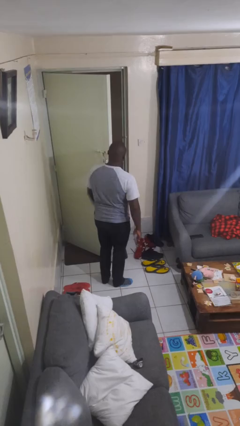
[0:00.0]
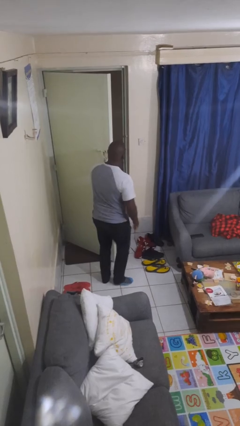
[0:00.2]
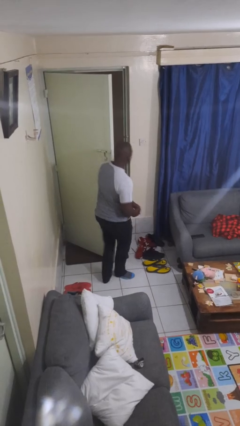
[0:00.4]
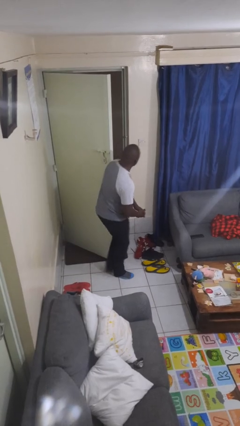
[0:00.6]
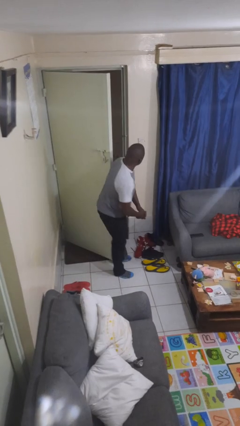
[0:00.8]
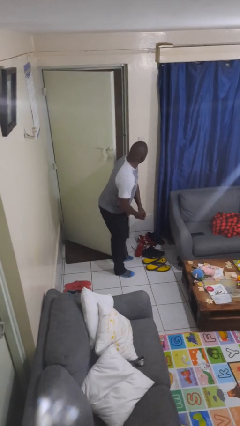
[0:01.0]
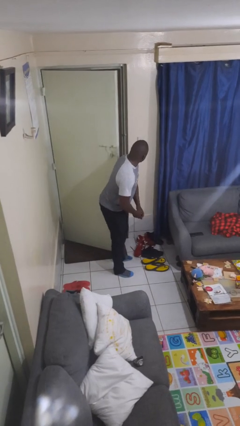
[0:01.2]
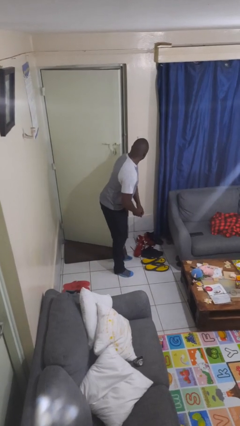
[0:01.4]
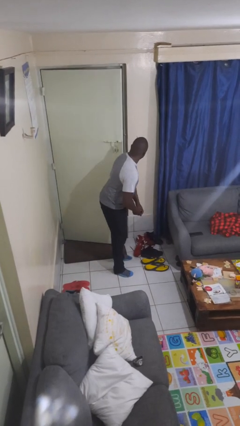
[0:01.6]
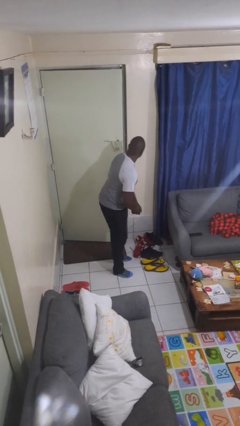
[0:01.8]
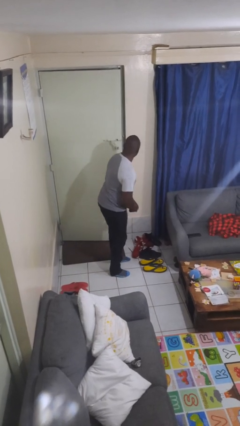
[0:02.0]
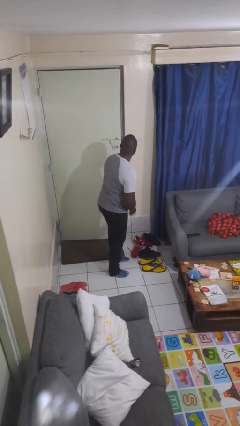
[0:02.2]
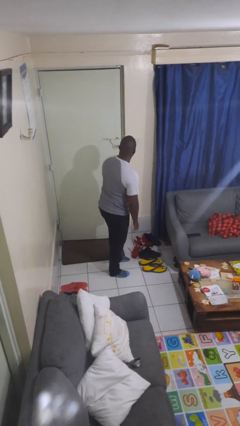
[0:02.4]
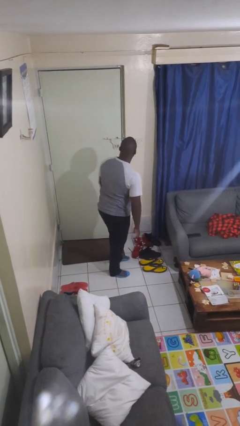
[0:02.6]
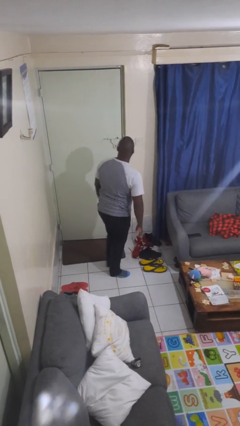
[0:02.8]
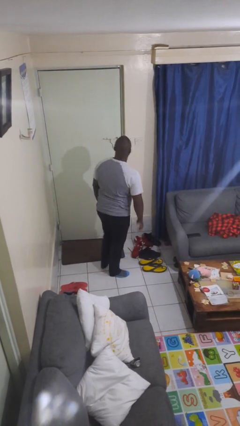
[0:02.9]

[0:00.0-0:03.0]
person closes door with hip

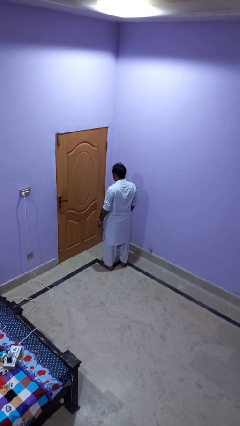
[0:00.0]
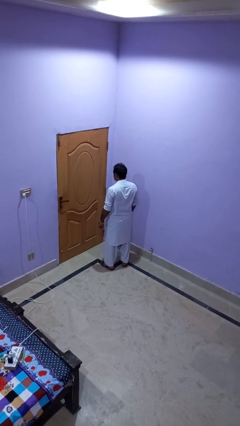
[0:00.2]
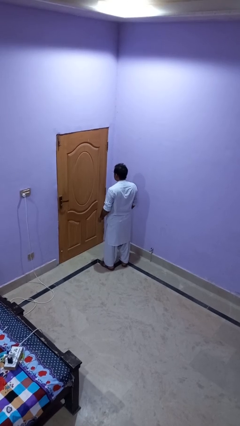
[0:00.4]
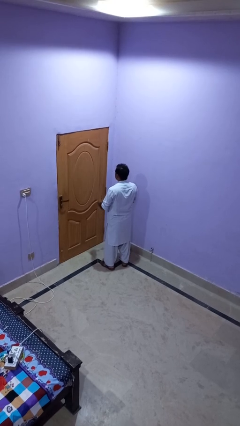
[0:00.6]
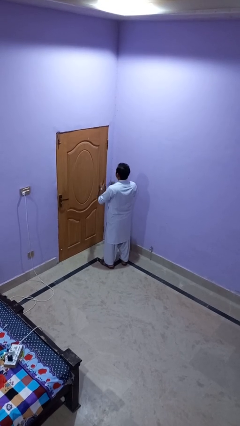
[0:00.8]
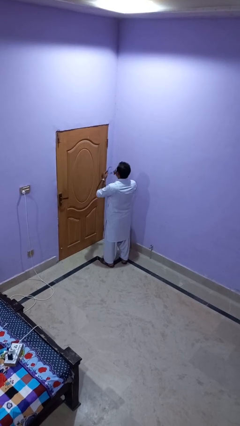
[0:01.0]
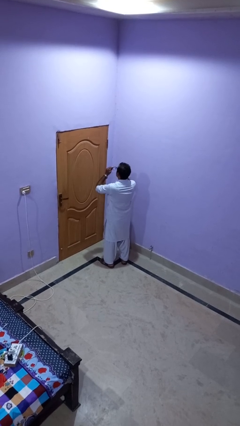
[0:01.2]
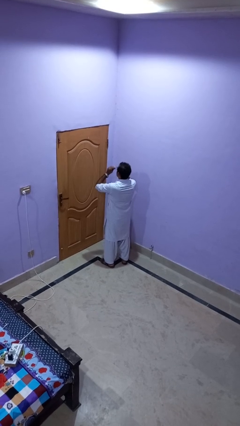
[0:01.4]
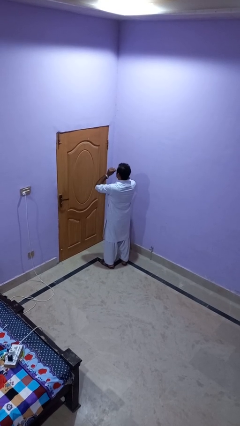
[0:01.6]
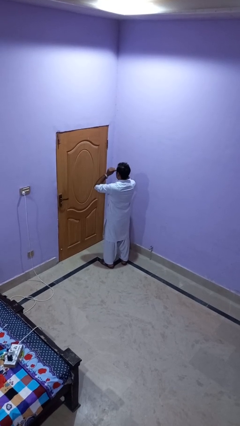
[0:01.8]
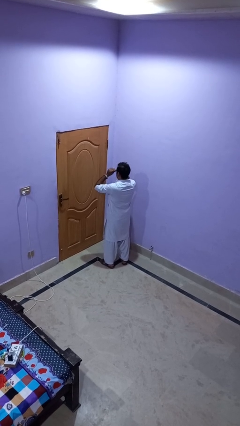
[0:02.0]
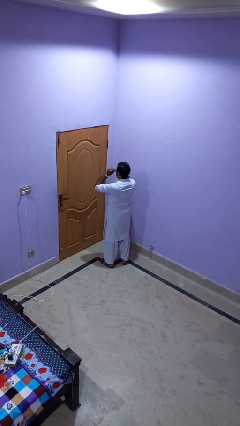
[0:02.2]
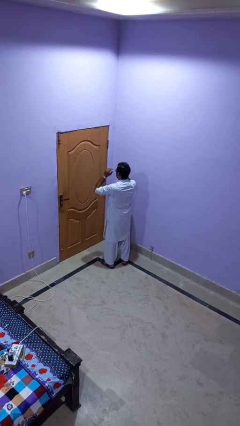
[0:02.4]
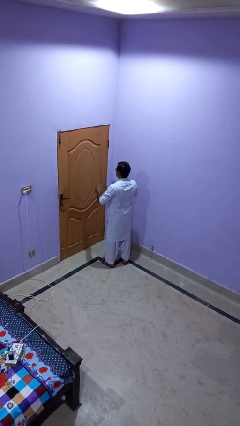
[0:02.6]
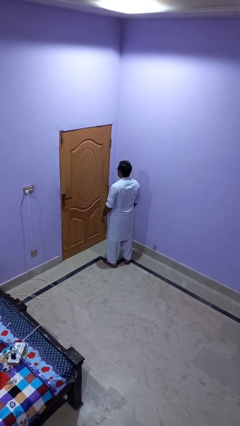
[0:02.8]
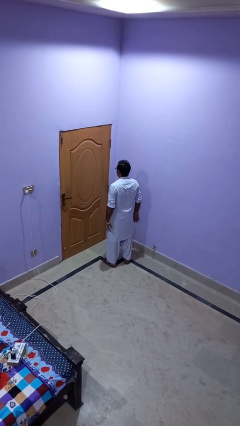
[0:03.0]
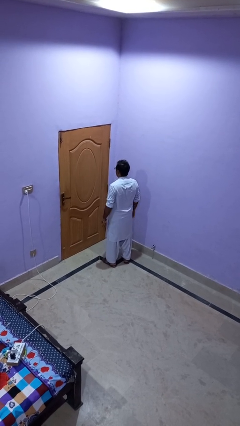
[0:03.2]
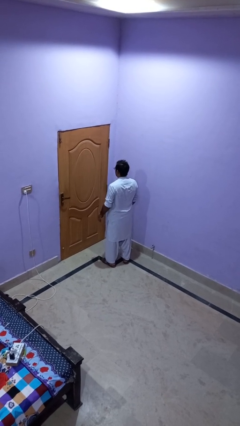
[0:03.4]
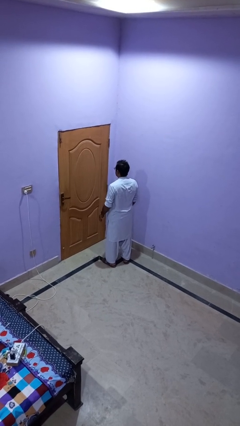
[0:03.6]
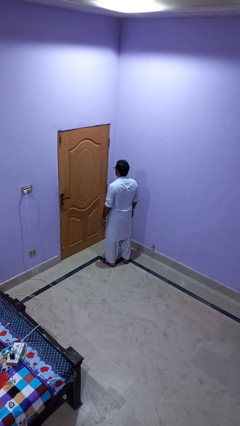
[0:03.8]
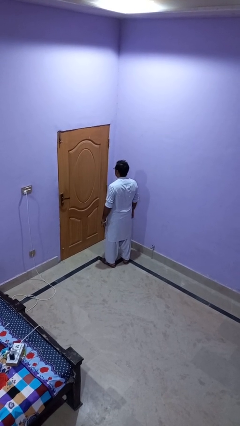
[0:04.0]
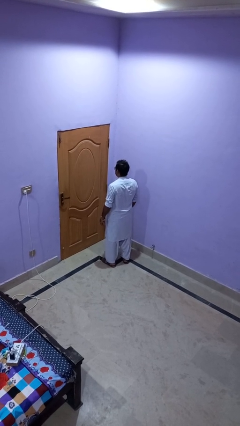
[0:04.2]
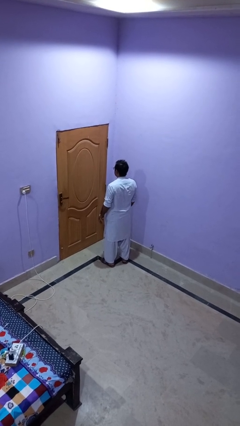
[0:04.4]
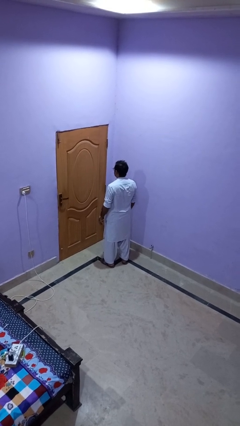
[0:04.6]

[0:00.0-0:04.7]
person puts on glasses

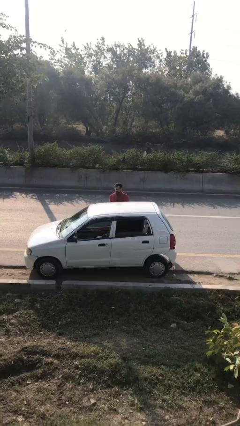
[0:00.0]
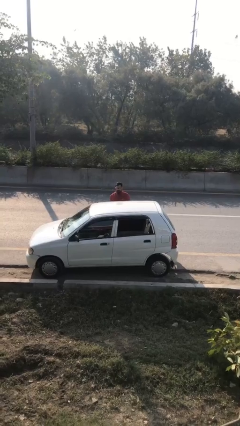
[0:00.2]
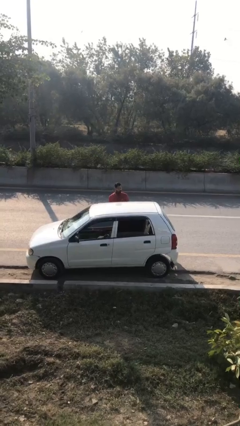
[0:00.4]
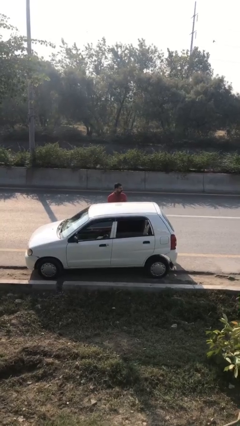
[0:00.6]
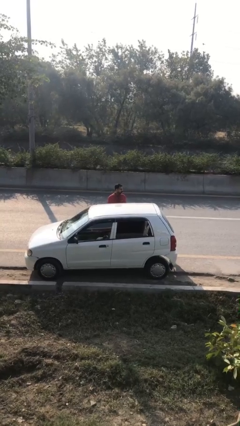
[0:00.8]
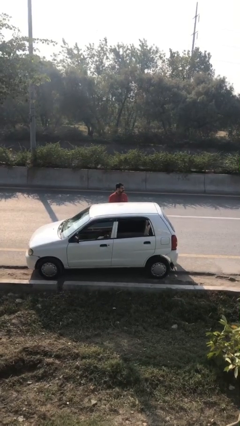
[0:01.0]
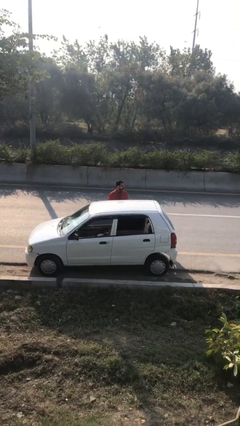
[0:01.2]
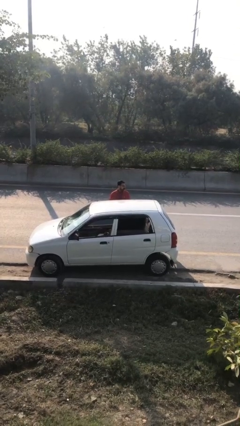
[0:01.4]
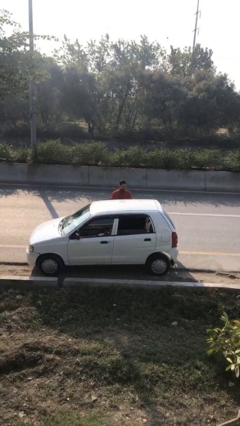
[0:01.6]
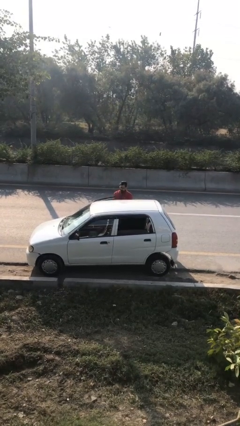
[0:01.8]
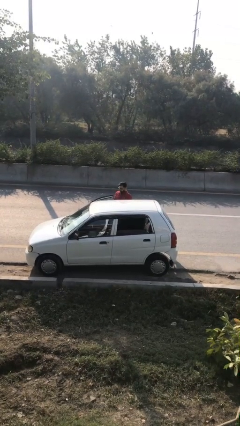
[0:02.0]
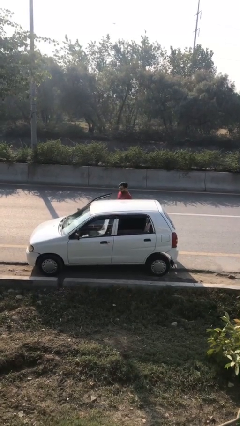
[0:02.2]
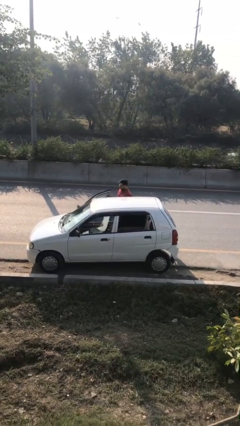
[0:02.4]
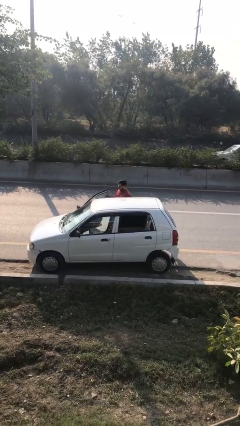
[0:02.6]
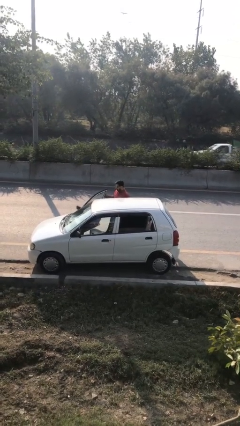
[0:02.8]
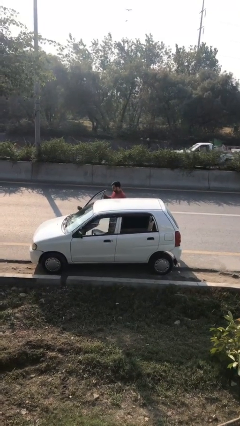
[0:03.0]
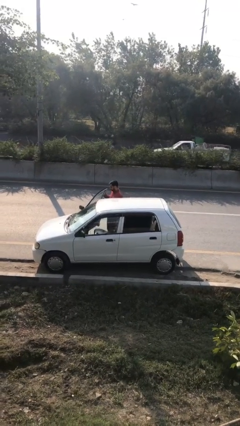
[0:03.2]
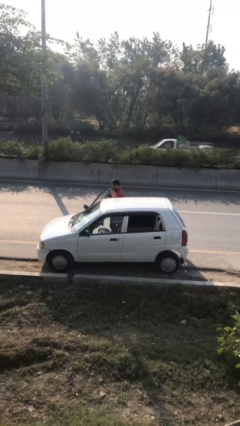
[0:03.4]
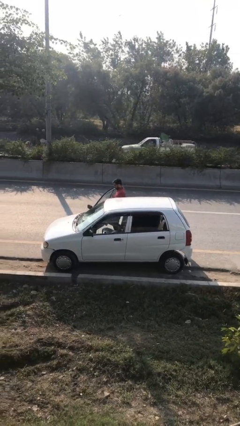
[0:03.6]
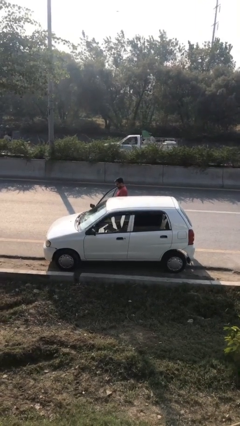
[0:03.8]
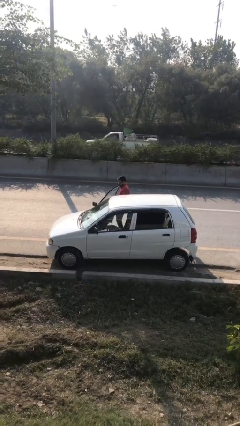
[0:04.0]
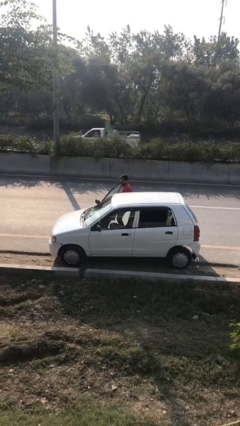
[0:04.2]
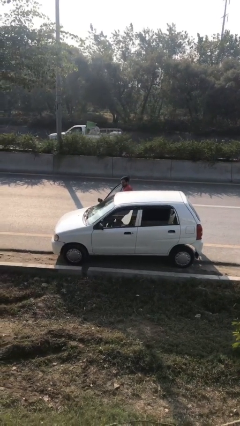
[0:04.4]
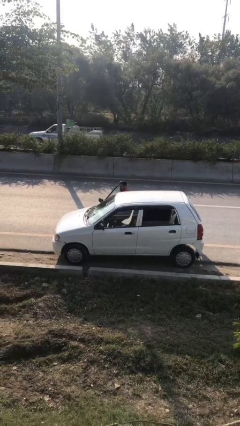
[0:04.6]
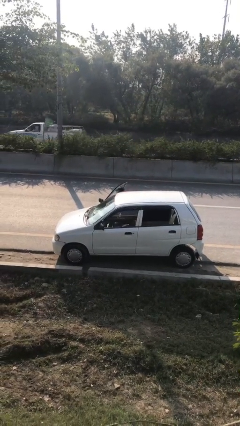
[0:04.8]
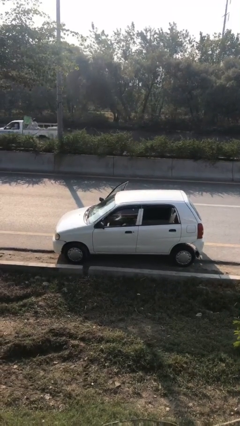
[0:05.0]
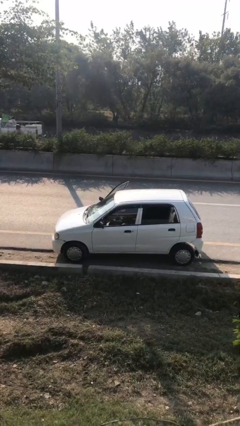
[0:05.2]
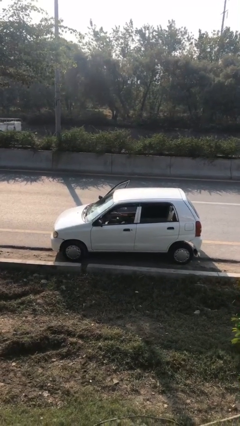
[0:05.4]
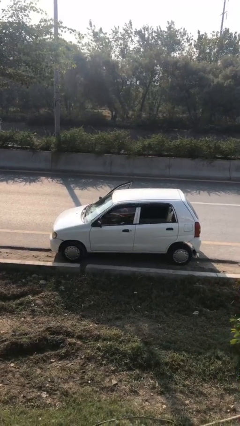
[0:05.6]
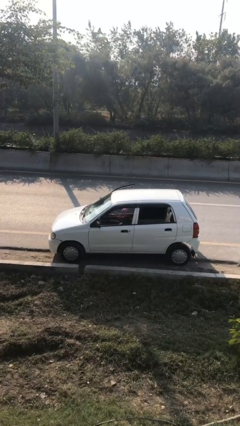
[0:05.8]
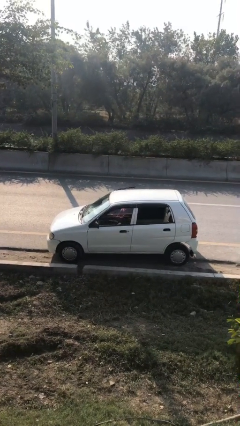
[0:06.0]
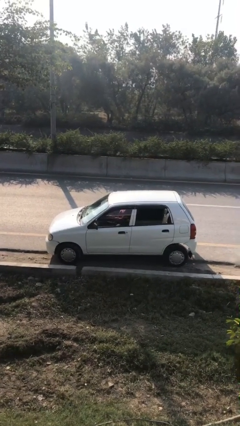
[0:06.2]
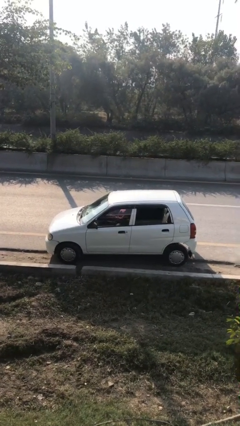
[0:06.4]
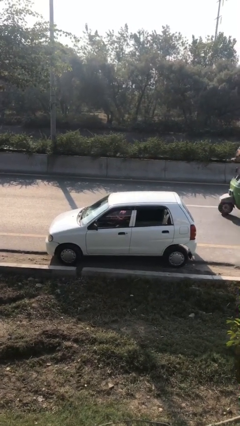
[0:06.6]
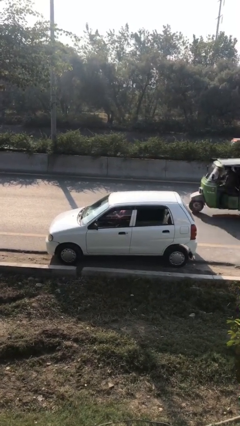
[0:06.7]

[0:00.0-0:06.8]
person enters car

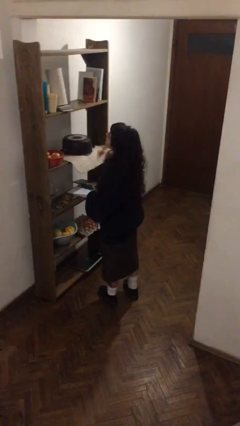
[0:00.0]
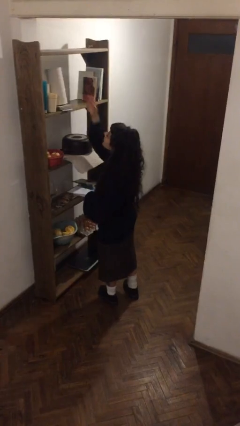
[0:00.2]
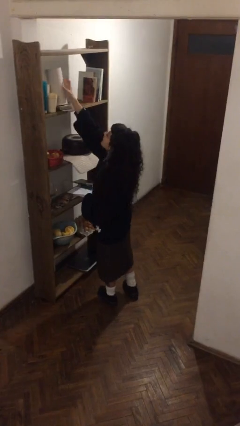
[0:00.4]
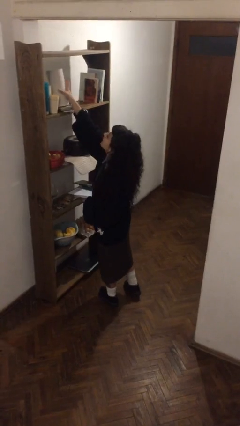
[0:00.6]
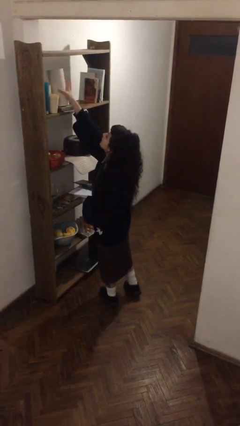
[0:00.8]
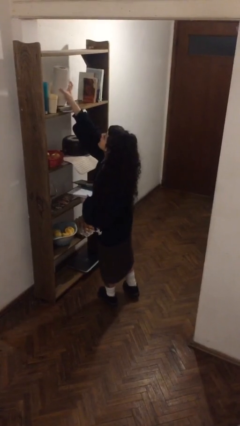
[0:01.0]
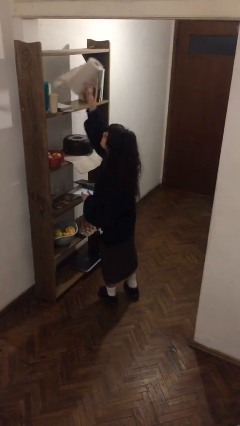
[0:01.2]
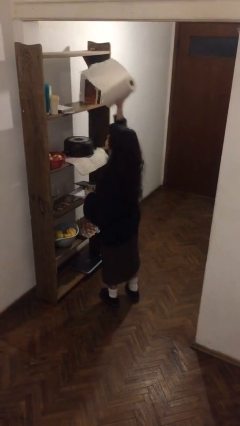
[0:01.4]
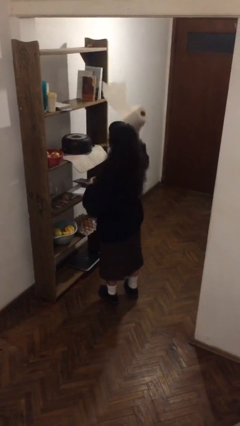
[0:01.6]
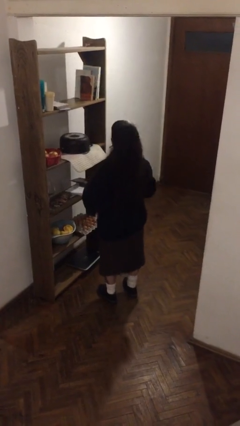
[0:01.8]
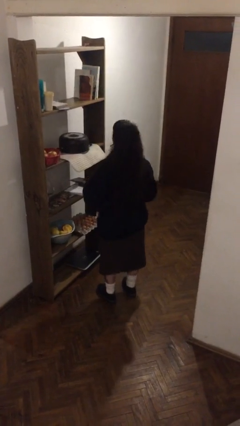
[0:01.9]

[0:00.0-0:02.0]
person picks up object from shelf

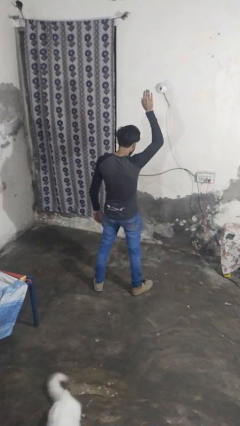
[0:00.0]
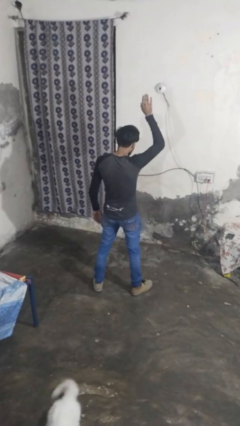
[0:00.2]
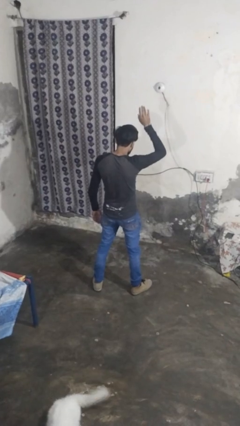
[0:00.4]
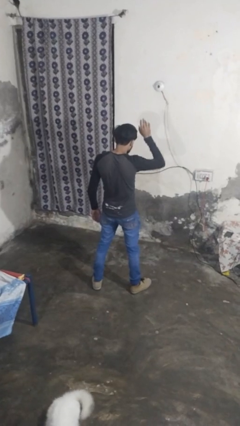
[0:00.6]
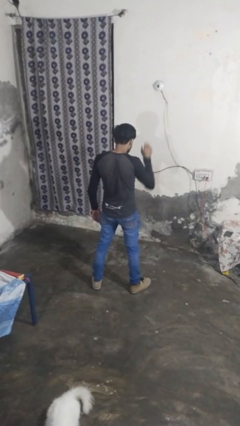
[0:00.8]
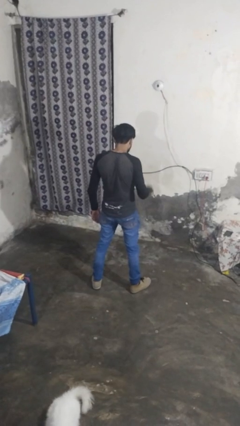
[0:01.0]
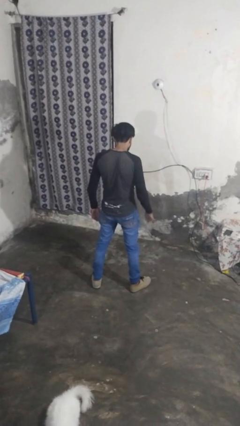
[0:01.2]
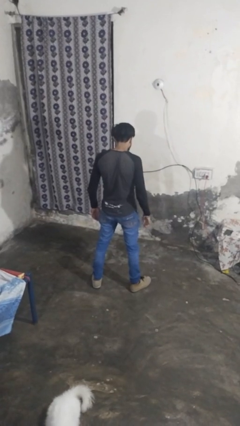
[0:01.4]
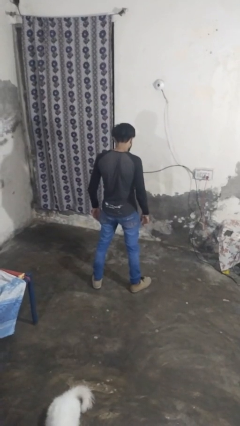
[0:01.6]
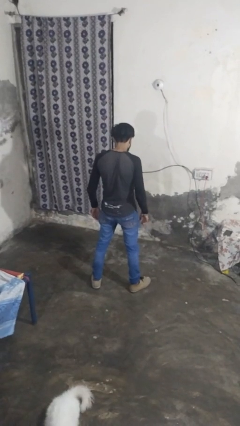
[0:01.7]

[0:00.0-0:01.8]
person gestures lower hand
